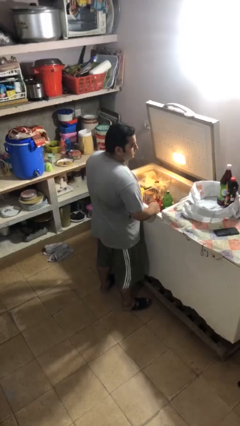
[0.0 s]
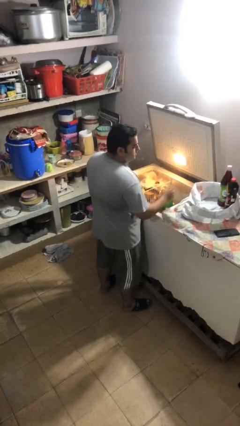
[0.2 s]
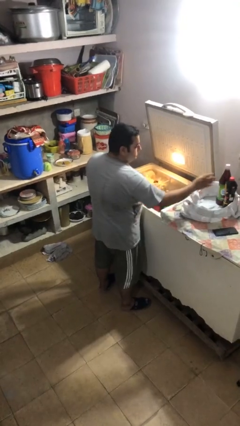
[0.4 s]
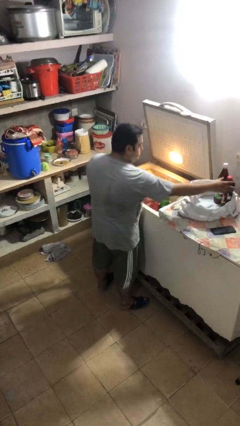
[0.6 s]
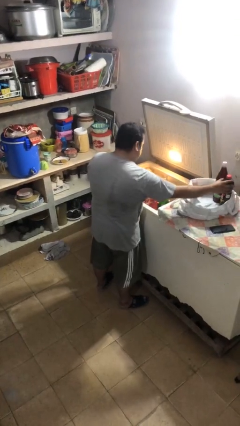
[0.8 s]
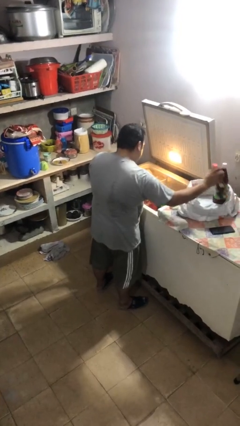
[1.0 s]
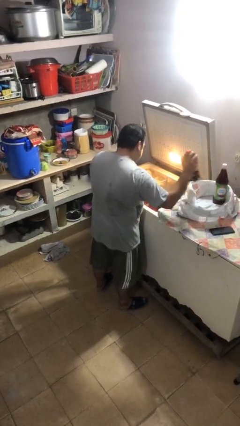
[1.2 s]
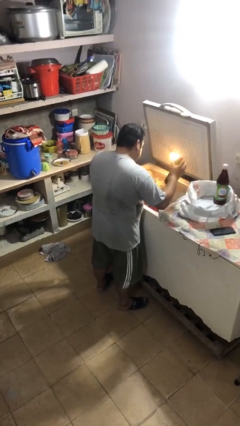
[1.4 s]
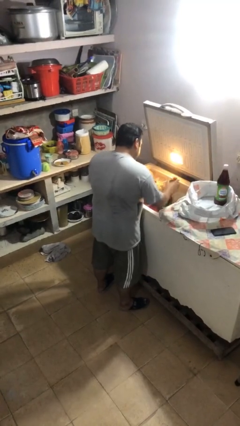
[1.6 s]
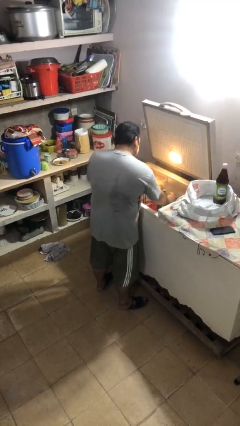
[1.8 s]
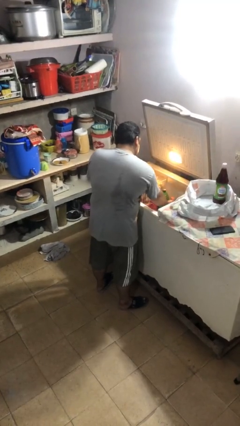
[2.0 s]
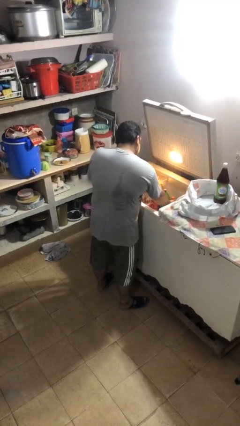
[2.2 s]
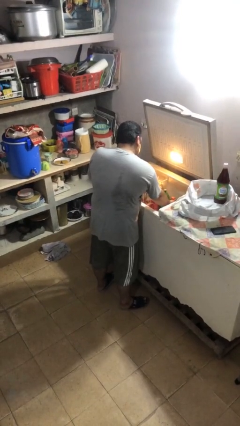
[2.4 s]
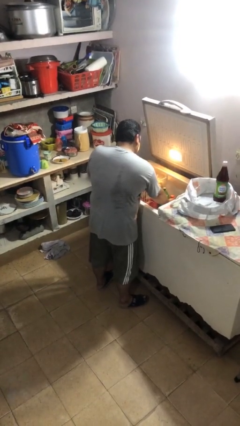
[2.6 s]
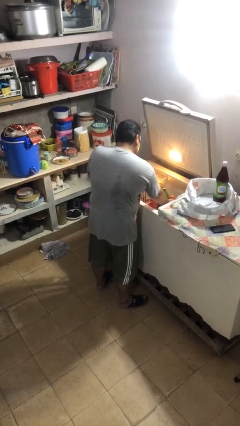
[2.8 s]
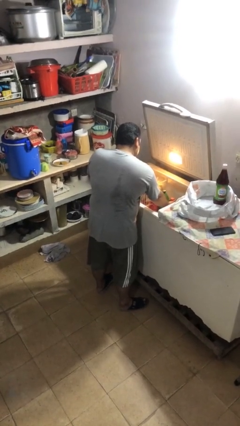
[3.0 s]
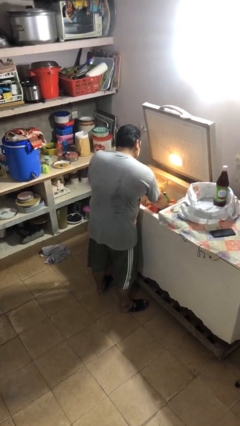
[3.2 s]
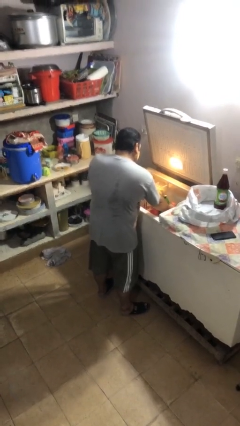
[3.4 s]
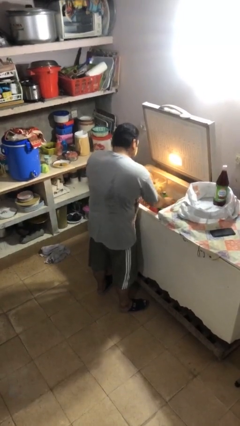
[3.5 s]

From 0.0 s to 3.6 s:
person loads groceries into refrigerator

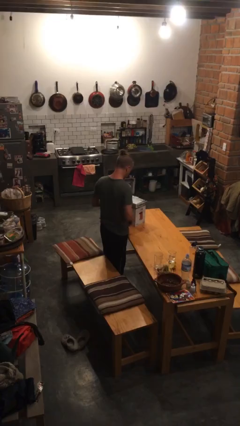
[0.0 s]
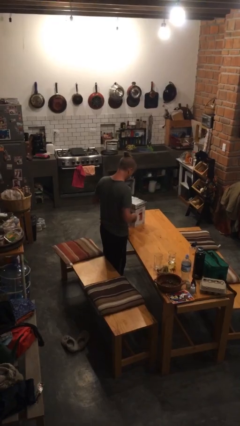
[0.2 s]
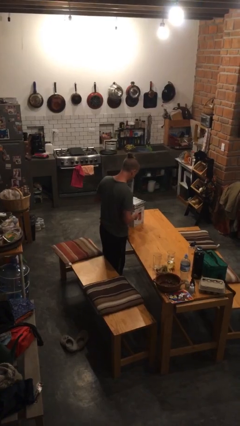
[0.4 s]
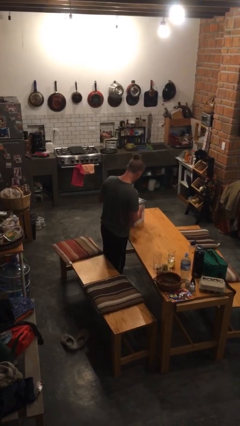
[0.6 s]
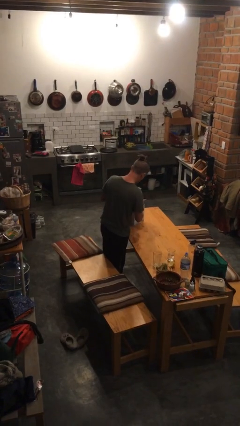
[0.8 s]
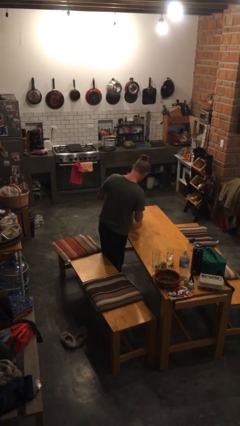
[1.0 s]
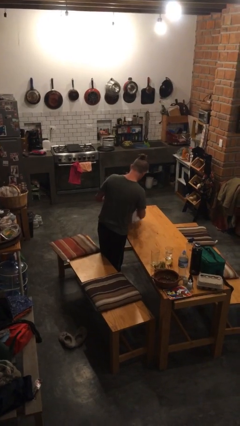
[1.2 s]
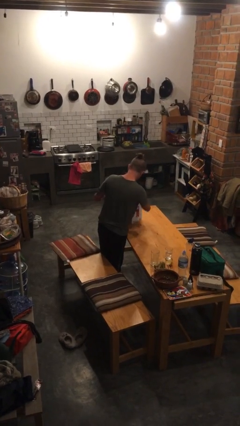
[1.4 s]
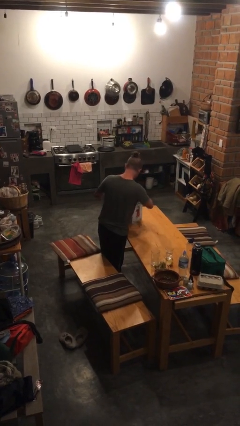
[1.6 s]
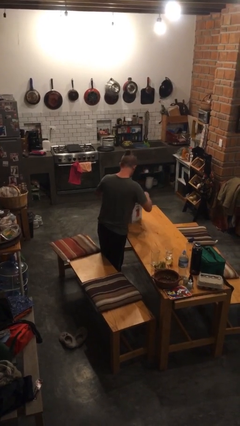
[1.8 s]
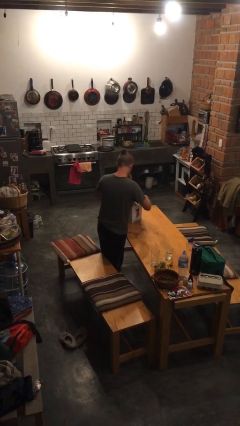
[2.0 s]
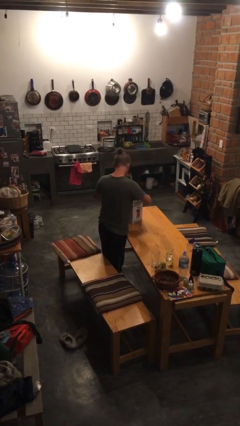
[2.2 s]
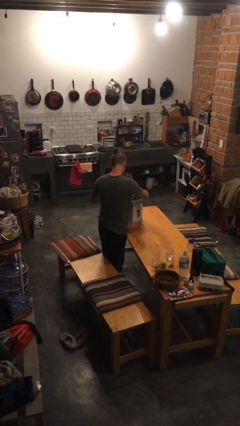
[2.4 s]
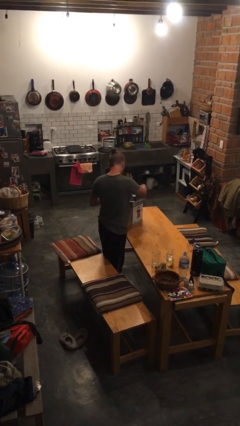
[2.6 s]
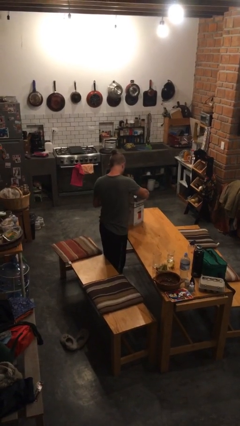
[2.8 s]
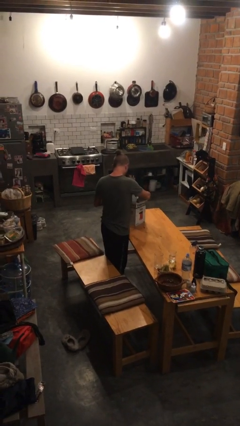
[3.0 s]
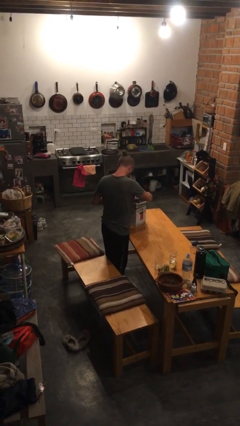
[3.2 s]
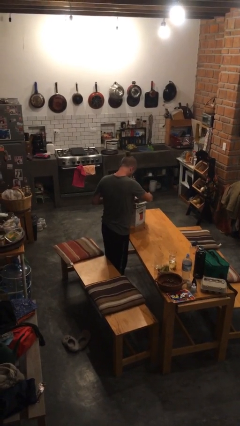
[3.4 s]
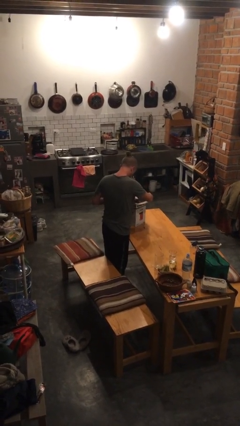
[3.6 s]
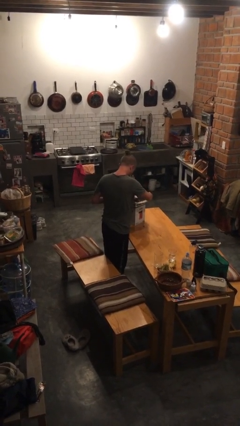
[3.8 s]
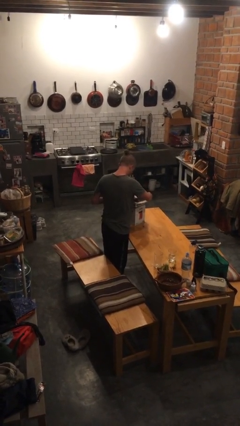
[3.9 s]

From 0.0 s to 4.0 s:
person opens box

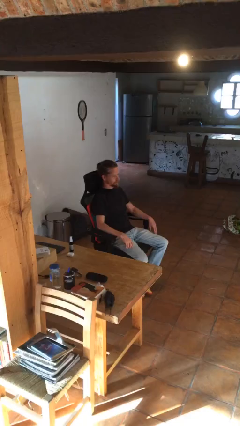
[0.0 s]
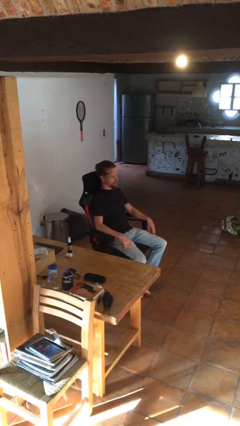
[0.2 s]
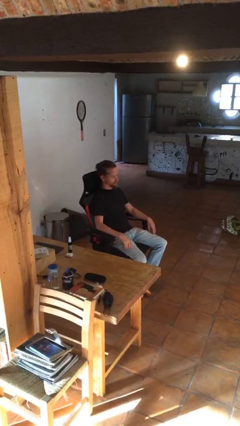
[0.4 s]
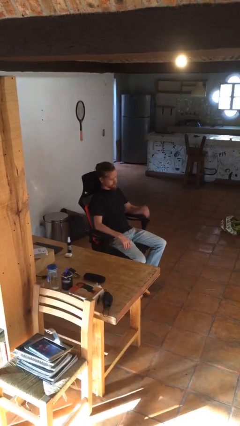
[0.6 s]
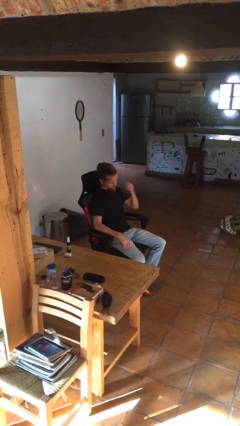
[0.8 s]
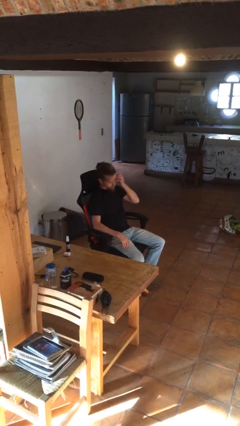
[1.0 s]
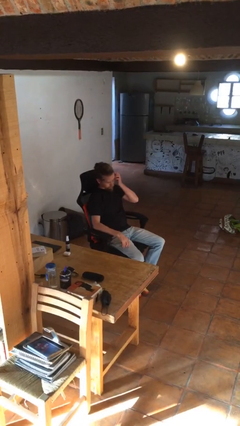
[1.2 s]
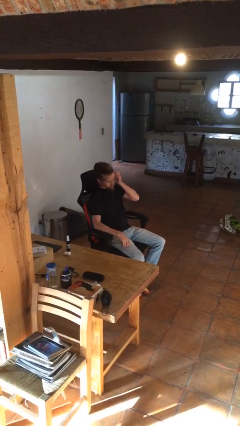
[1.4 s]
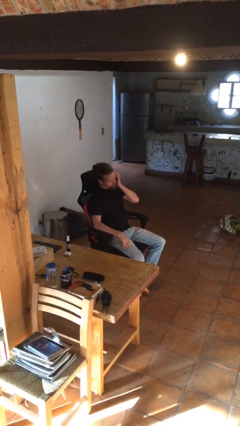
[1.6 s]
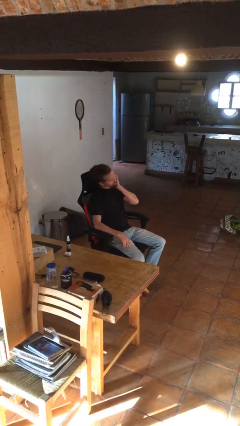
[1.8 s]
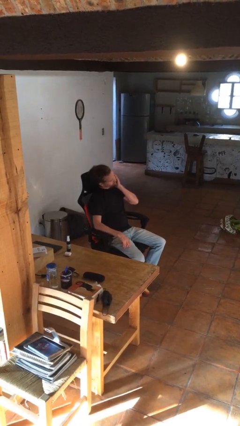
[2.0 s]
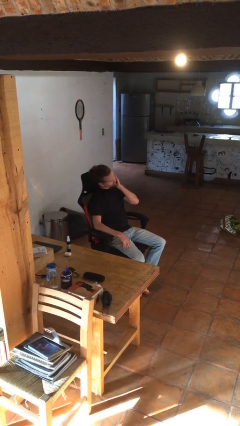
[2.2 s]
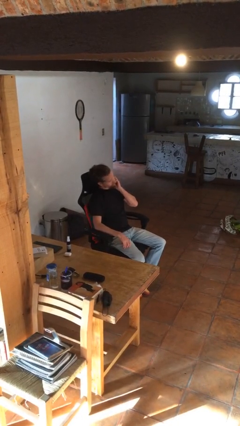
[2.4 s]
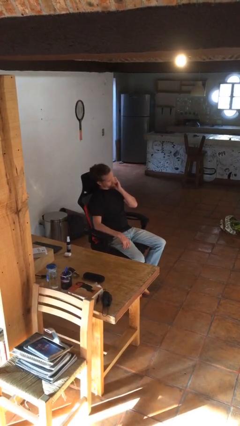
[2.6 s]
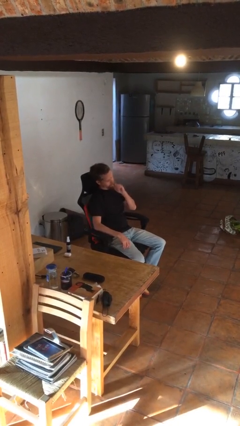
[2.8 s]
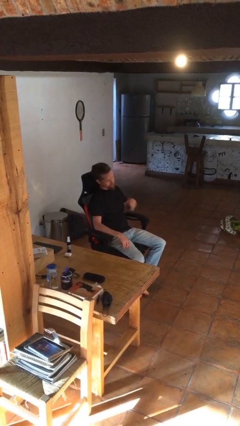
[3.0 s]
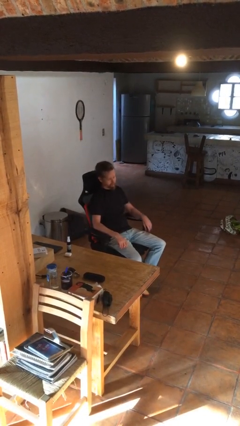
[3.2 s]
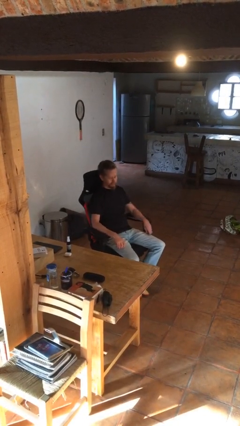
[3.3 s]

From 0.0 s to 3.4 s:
person scratches face

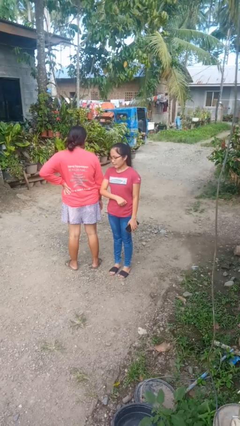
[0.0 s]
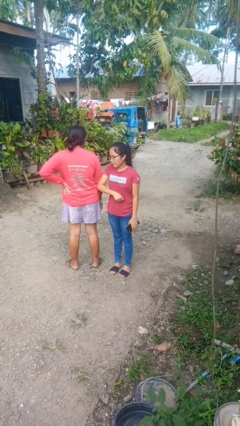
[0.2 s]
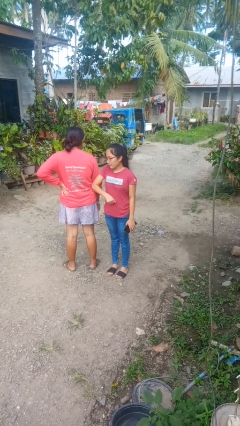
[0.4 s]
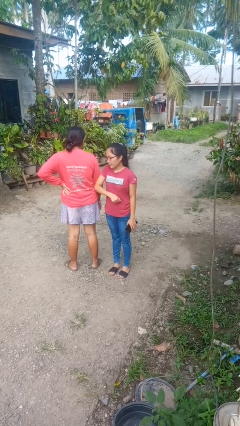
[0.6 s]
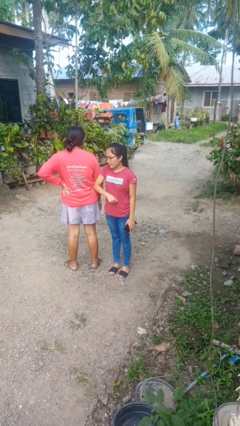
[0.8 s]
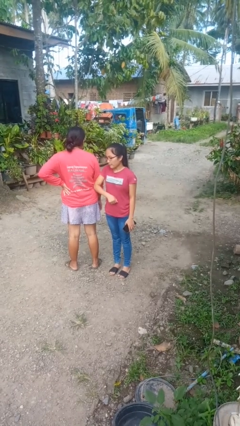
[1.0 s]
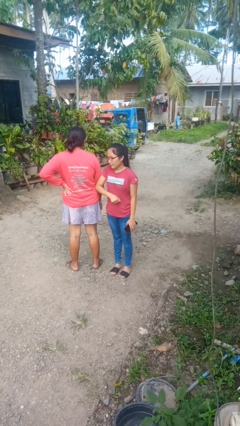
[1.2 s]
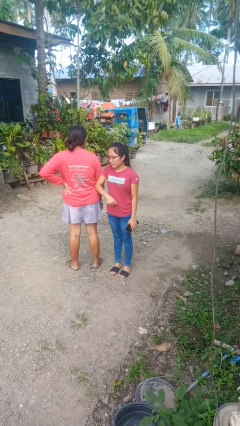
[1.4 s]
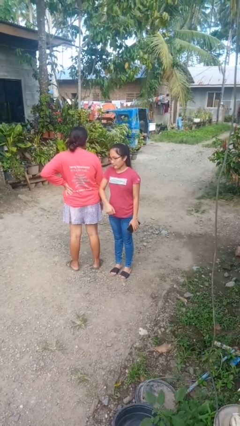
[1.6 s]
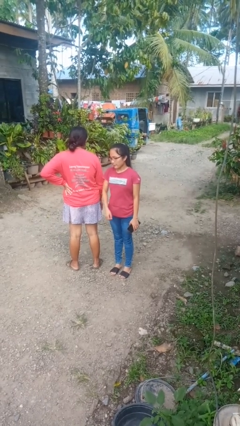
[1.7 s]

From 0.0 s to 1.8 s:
person nudges person with elbow

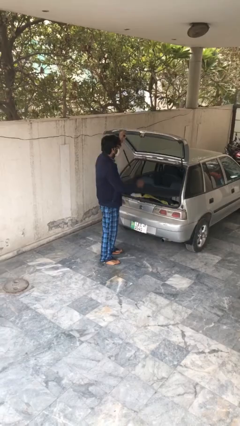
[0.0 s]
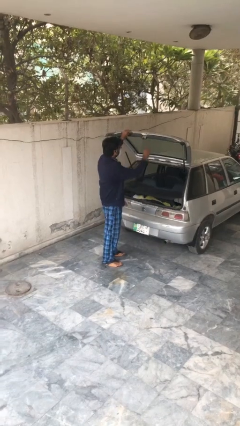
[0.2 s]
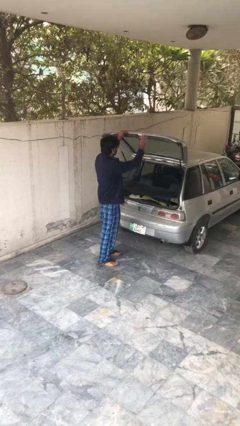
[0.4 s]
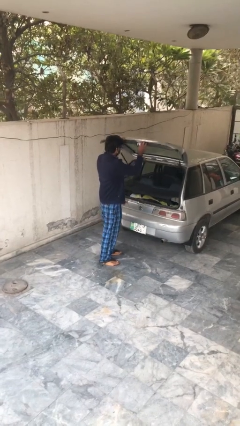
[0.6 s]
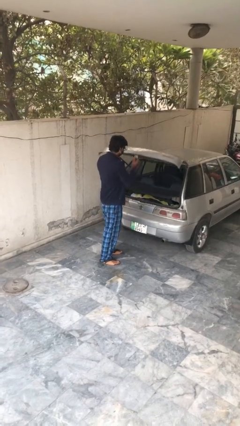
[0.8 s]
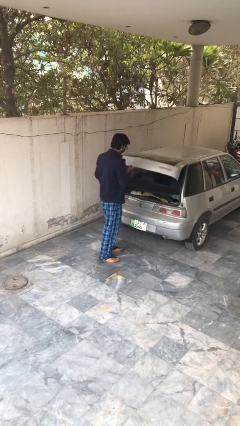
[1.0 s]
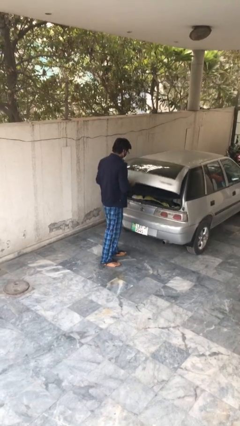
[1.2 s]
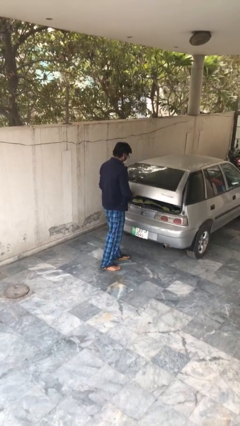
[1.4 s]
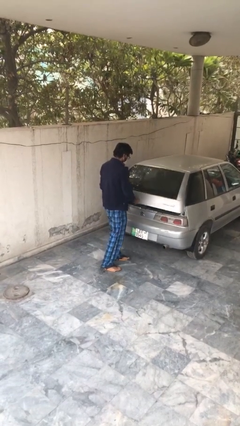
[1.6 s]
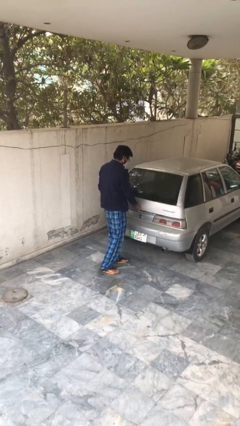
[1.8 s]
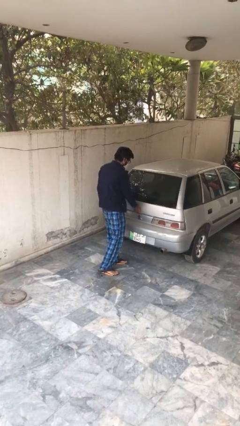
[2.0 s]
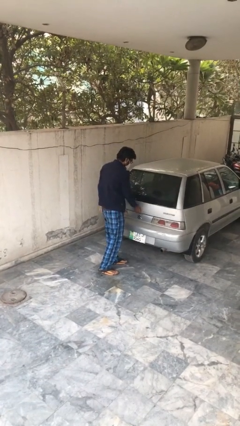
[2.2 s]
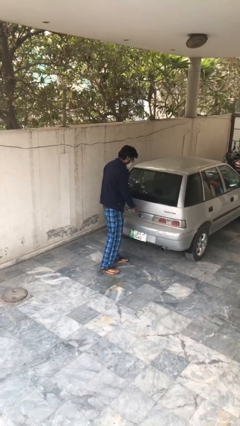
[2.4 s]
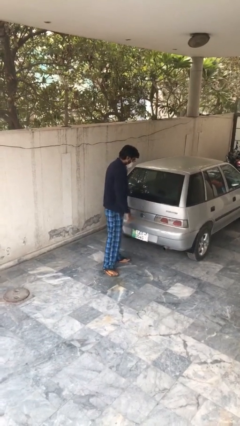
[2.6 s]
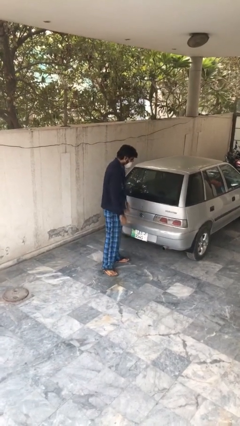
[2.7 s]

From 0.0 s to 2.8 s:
person closes car trunk

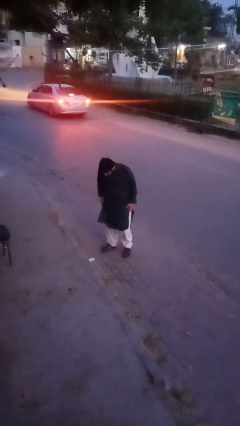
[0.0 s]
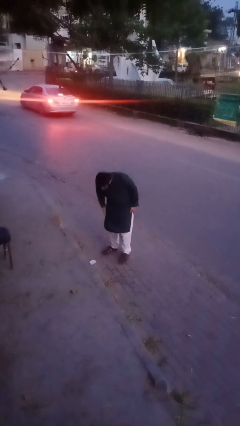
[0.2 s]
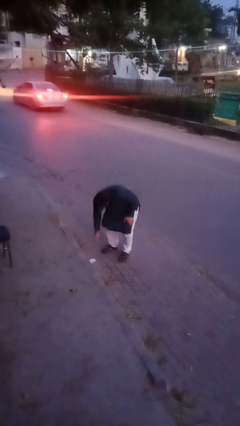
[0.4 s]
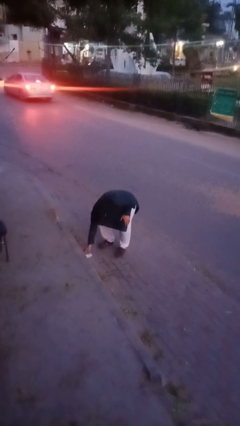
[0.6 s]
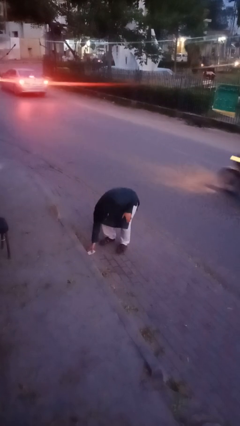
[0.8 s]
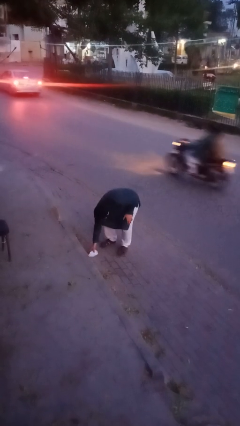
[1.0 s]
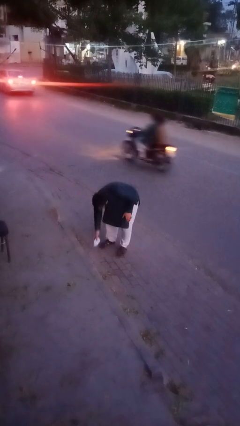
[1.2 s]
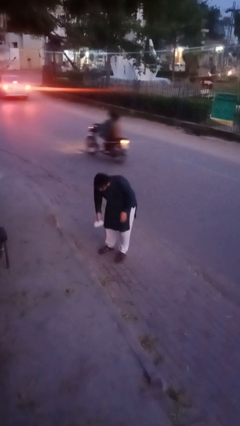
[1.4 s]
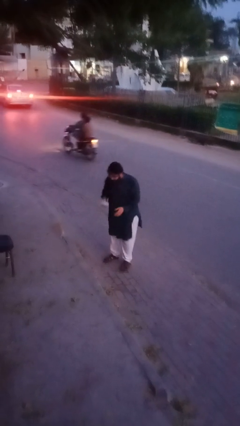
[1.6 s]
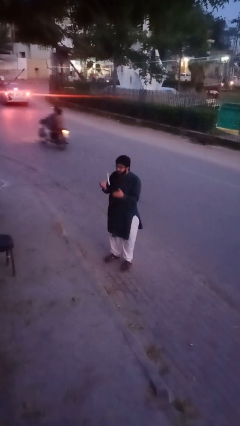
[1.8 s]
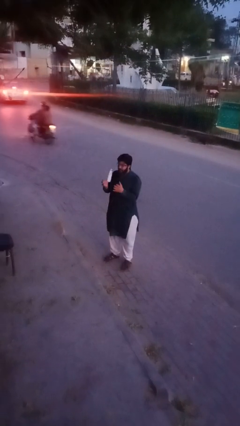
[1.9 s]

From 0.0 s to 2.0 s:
person picks up object from floor
